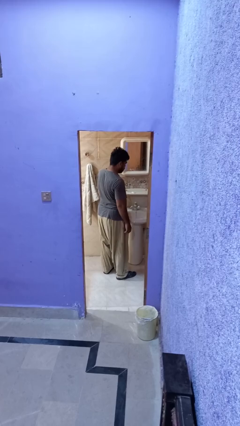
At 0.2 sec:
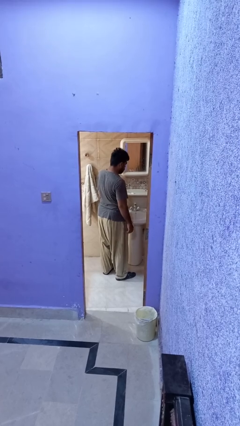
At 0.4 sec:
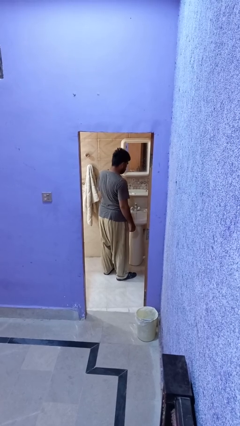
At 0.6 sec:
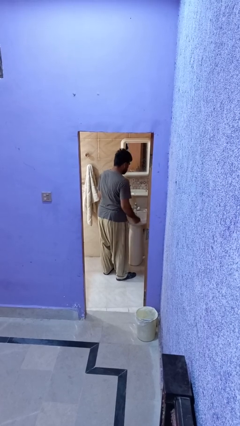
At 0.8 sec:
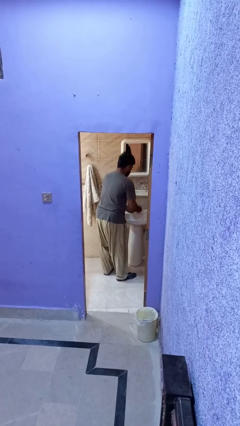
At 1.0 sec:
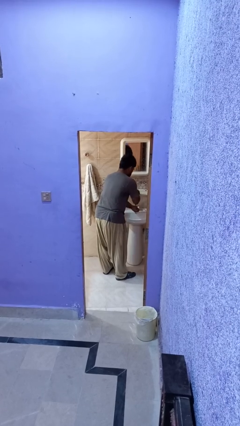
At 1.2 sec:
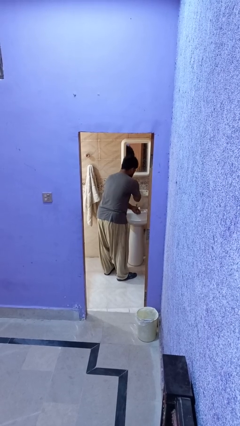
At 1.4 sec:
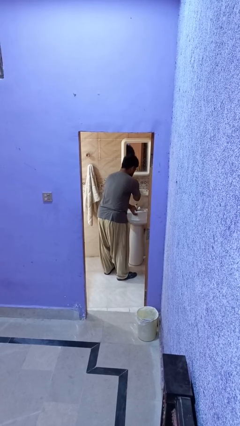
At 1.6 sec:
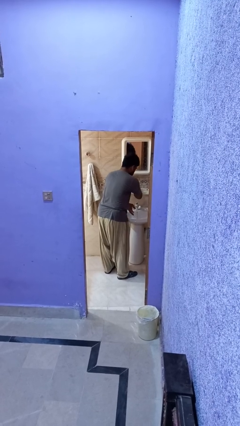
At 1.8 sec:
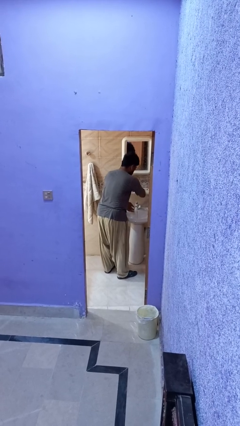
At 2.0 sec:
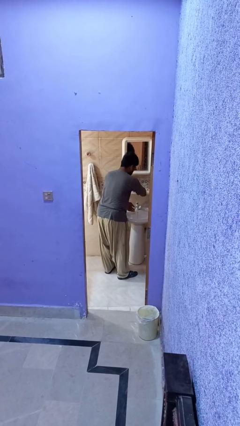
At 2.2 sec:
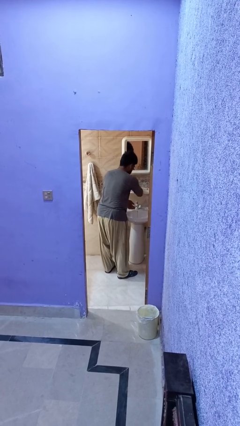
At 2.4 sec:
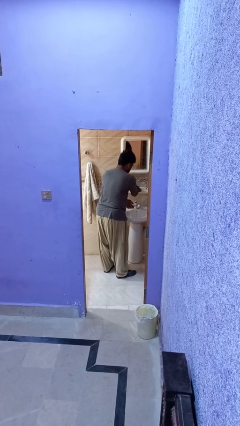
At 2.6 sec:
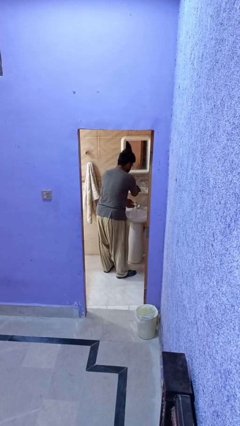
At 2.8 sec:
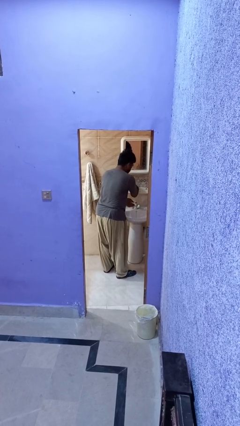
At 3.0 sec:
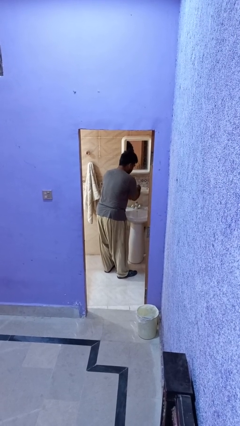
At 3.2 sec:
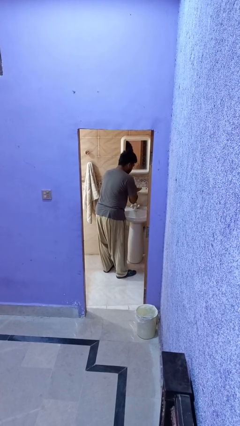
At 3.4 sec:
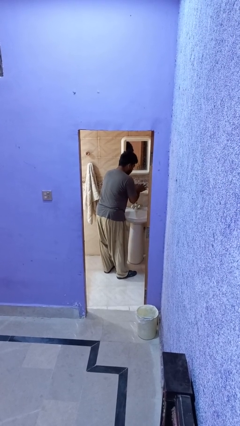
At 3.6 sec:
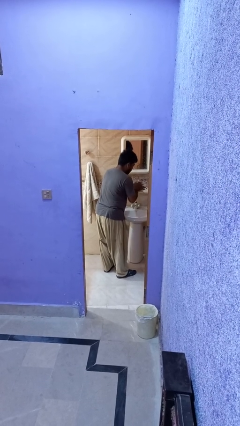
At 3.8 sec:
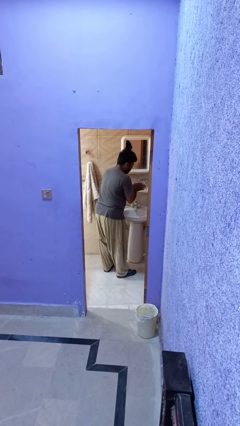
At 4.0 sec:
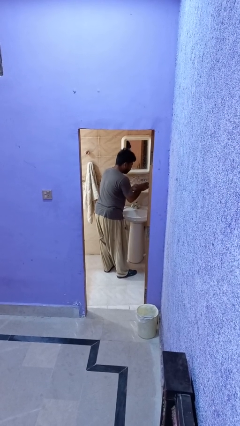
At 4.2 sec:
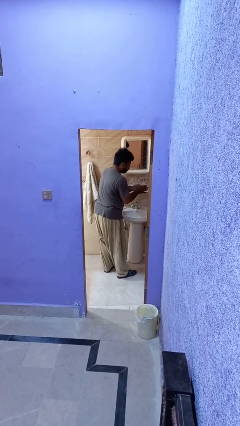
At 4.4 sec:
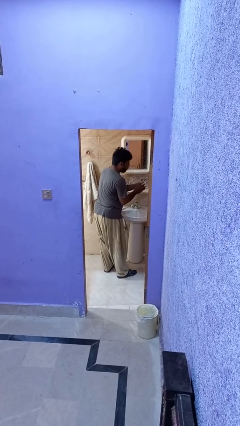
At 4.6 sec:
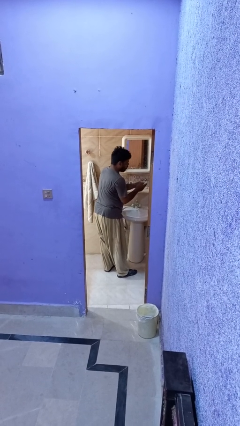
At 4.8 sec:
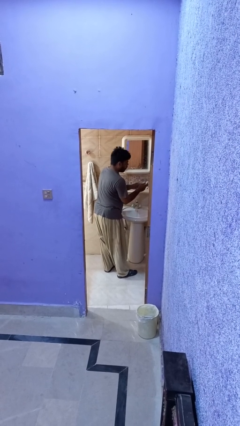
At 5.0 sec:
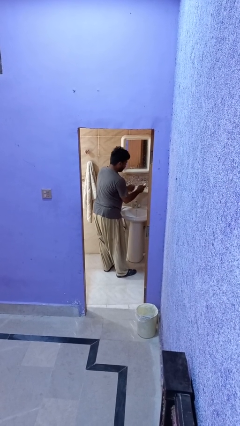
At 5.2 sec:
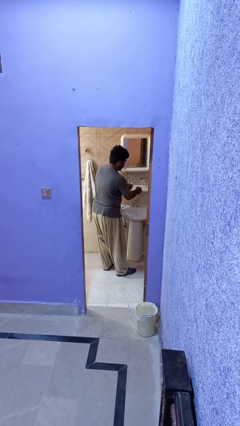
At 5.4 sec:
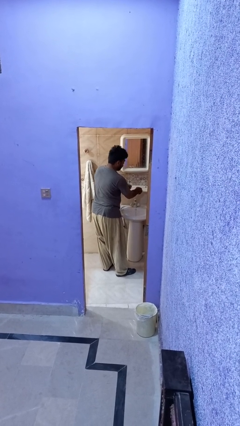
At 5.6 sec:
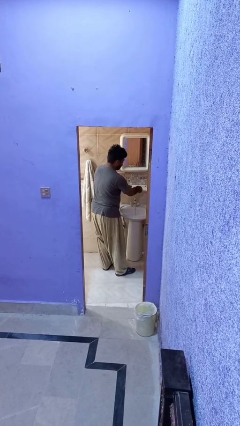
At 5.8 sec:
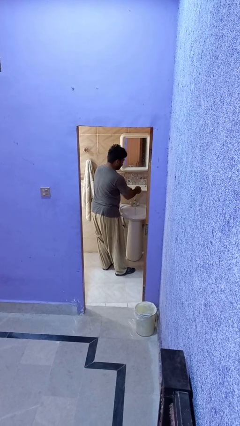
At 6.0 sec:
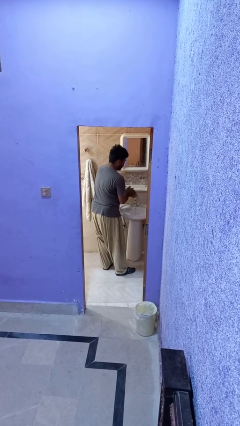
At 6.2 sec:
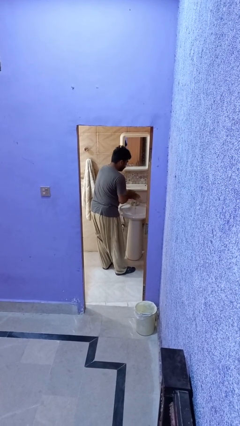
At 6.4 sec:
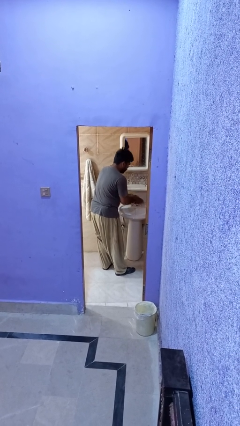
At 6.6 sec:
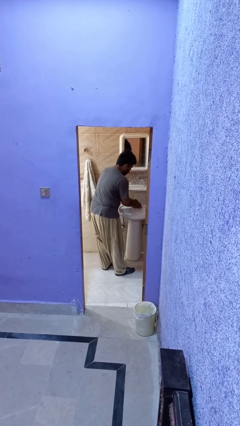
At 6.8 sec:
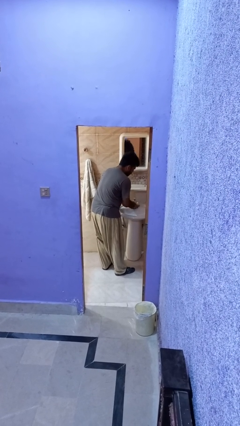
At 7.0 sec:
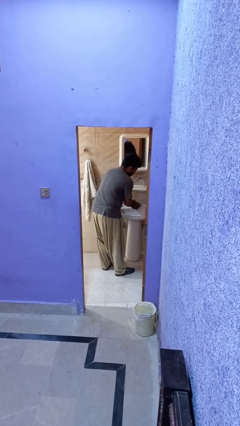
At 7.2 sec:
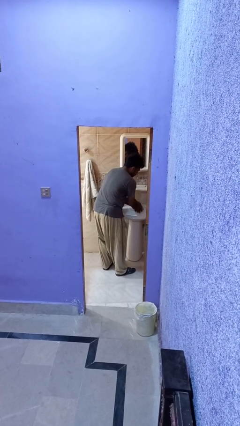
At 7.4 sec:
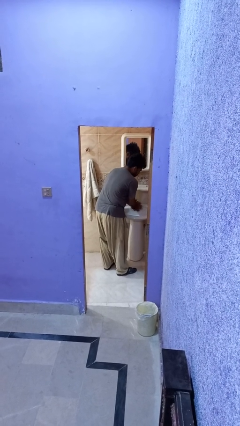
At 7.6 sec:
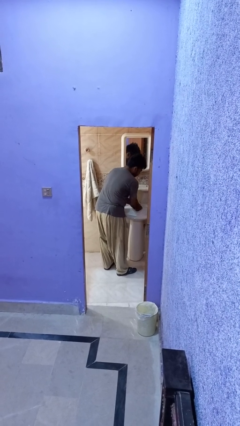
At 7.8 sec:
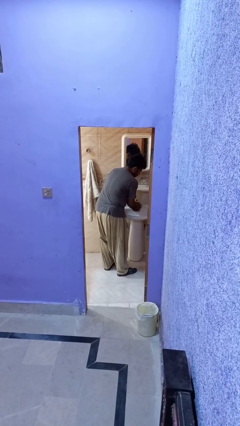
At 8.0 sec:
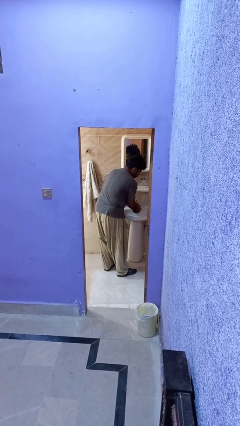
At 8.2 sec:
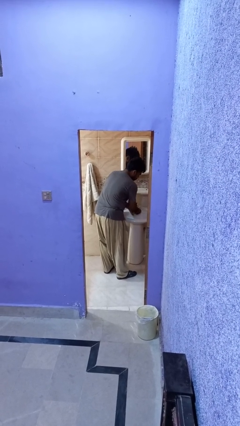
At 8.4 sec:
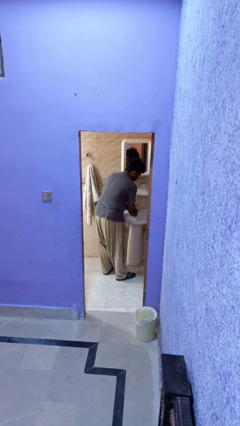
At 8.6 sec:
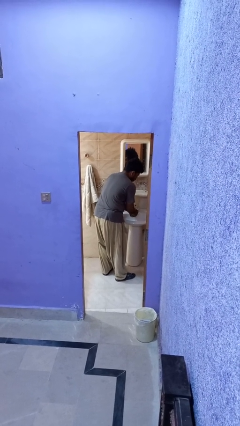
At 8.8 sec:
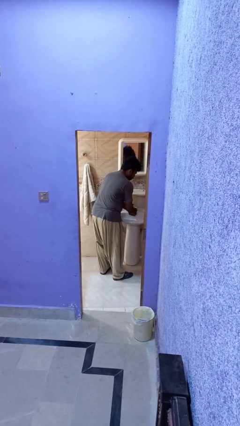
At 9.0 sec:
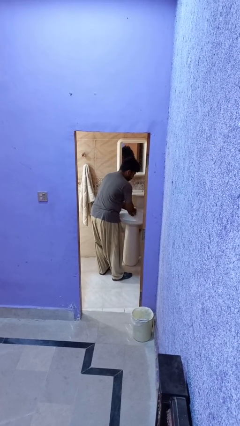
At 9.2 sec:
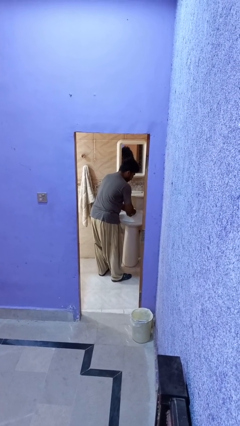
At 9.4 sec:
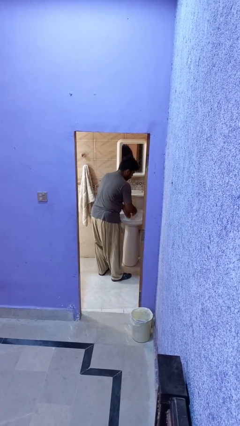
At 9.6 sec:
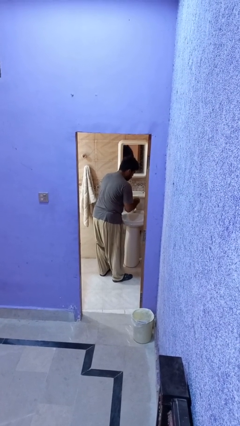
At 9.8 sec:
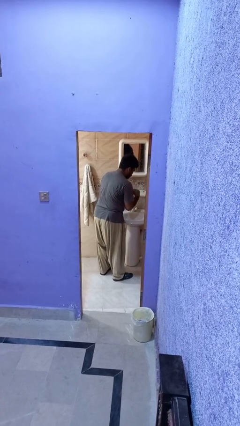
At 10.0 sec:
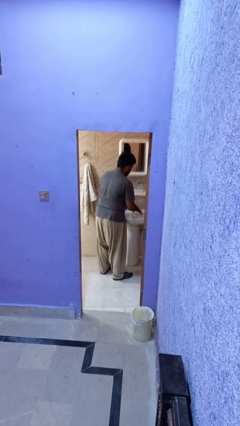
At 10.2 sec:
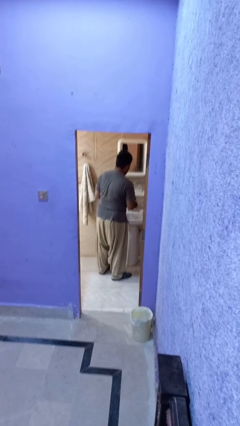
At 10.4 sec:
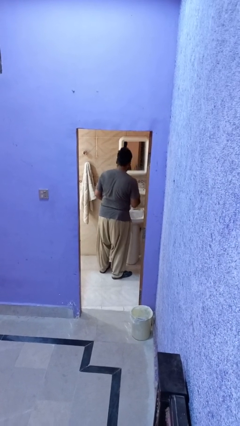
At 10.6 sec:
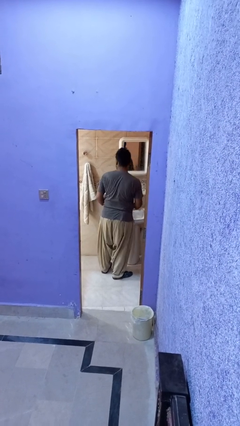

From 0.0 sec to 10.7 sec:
person washes hands

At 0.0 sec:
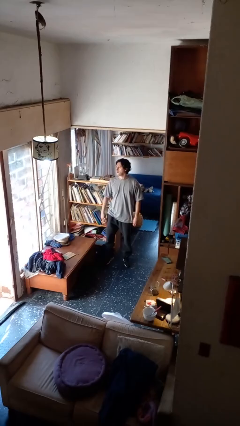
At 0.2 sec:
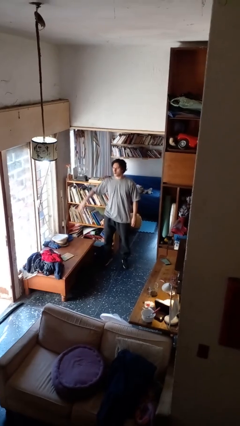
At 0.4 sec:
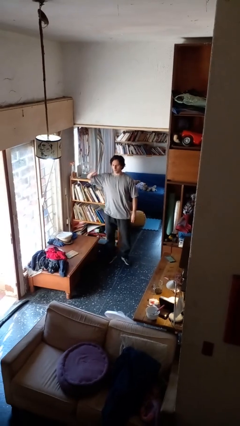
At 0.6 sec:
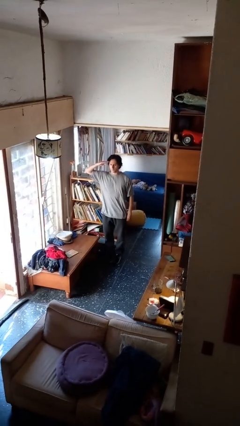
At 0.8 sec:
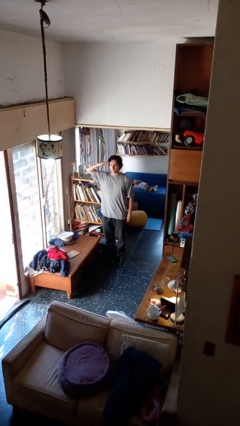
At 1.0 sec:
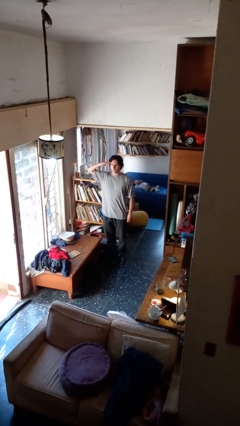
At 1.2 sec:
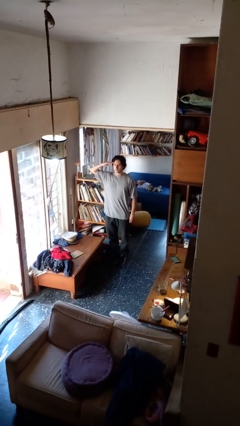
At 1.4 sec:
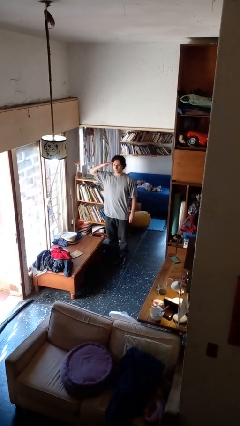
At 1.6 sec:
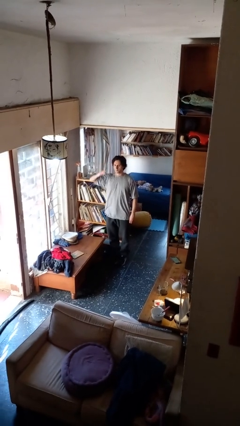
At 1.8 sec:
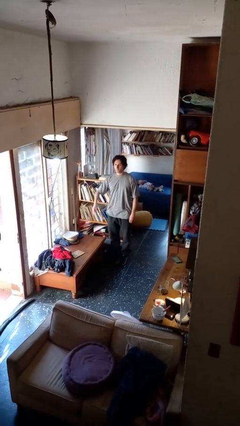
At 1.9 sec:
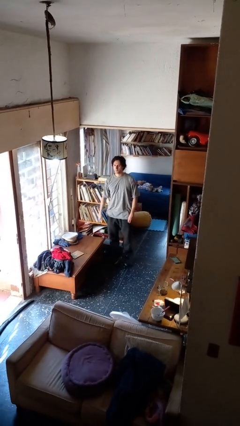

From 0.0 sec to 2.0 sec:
person salutes

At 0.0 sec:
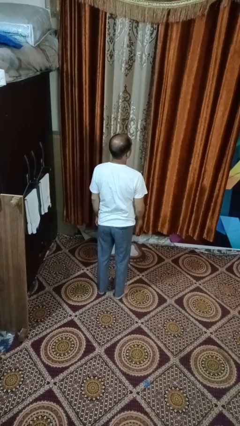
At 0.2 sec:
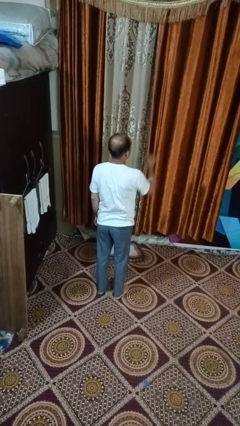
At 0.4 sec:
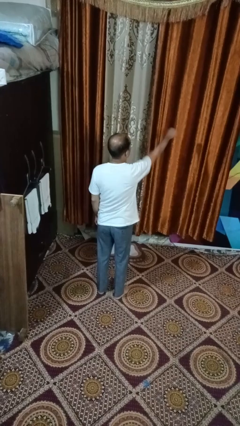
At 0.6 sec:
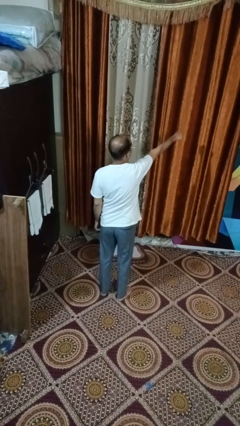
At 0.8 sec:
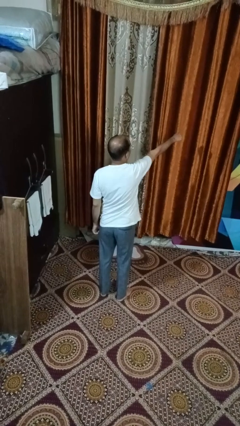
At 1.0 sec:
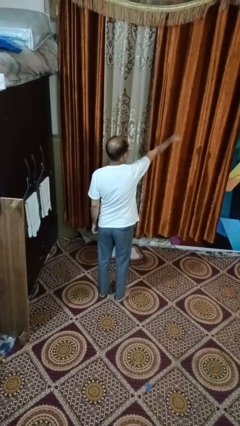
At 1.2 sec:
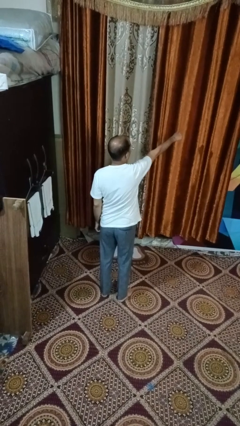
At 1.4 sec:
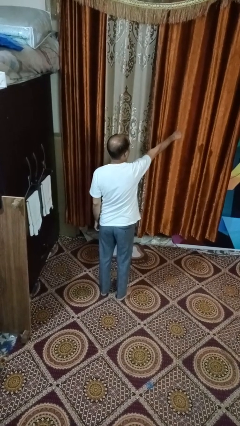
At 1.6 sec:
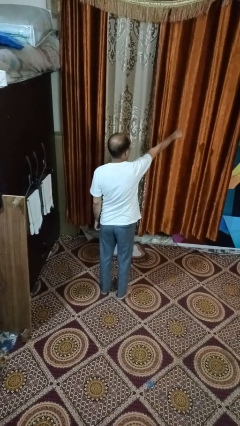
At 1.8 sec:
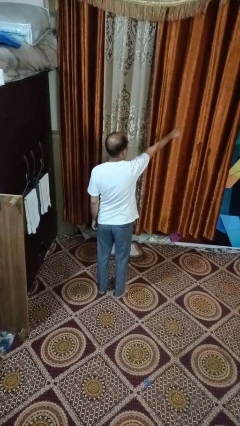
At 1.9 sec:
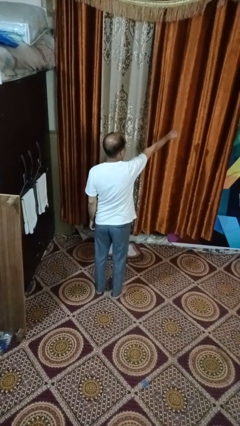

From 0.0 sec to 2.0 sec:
person punches

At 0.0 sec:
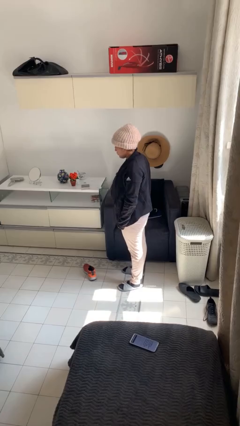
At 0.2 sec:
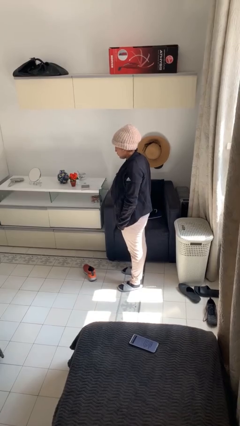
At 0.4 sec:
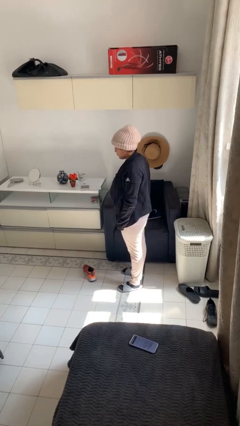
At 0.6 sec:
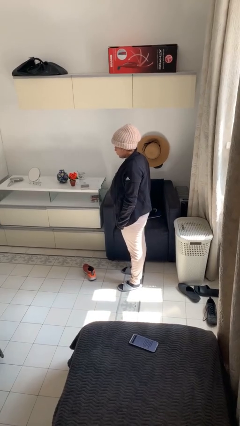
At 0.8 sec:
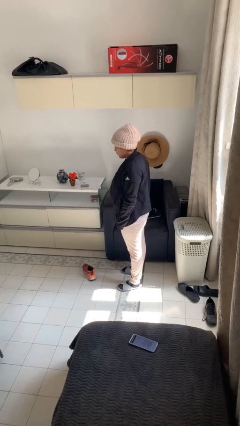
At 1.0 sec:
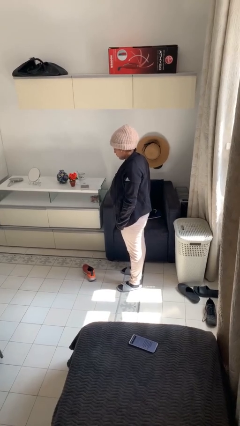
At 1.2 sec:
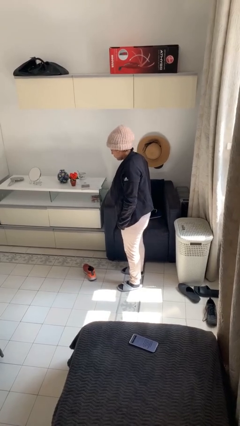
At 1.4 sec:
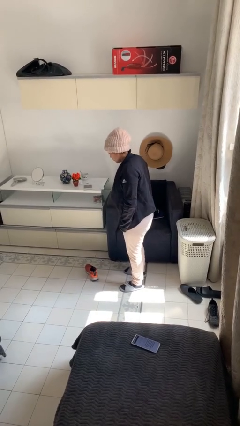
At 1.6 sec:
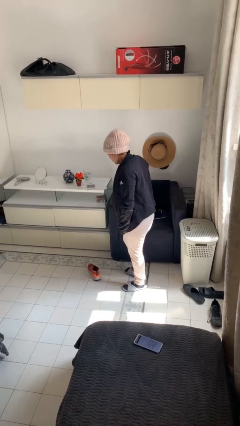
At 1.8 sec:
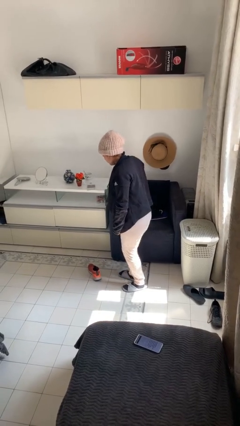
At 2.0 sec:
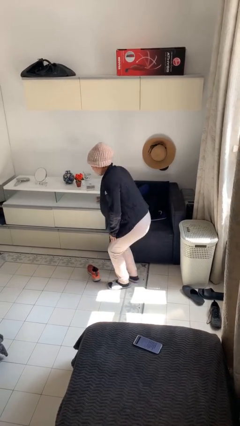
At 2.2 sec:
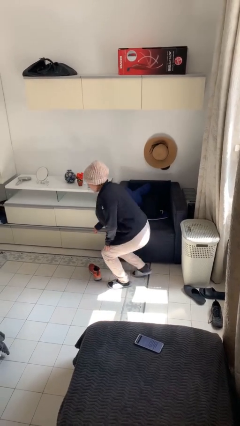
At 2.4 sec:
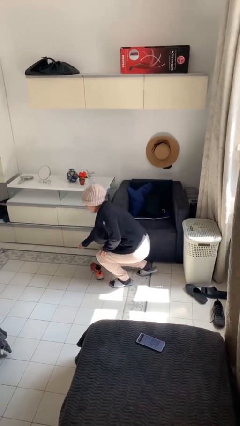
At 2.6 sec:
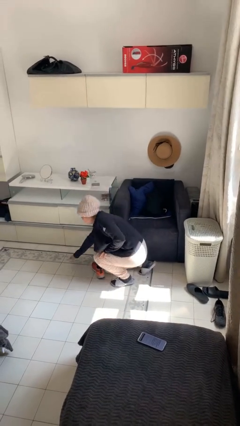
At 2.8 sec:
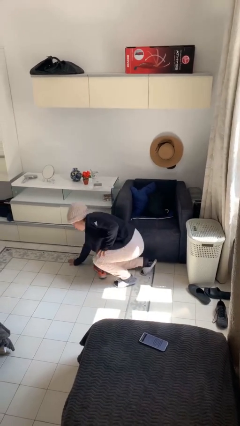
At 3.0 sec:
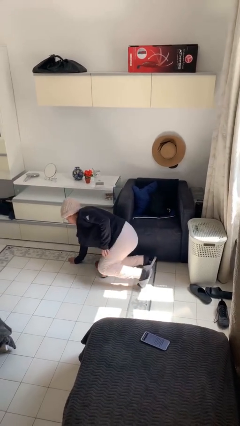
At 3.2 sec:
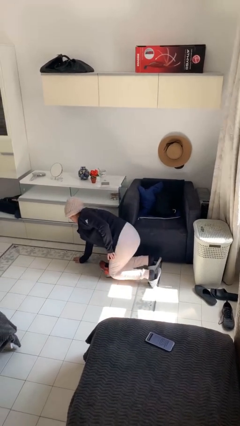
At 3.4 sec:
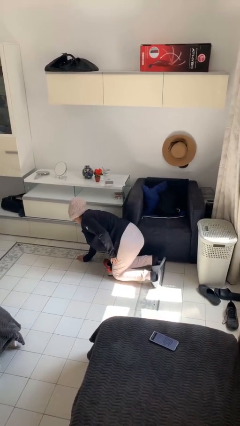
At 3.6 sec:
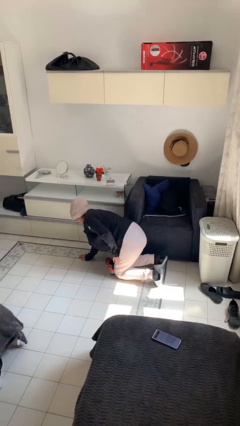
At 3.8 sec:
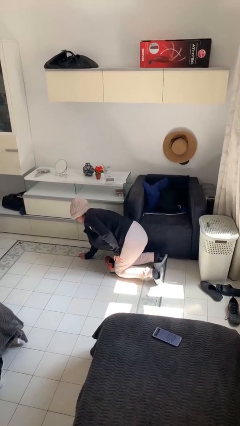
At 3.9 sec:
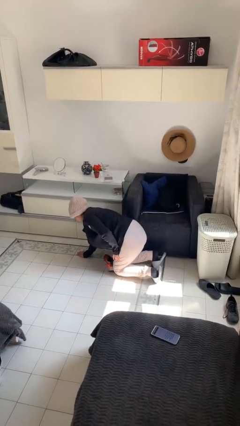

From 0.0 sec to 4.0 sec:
person trips on object on floor
